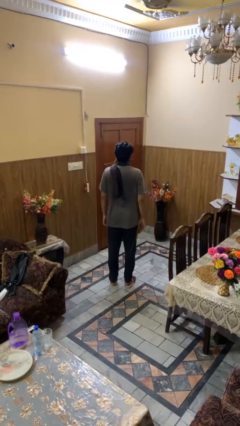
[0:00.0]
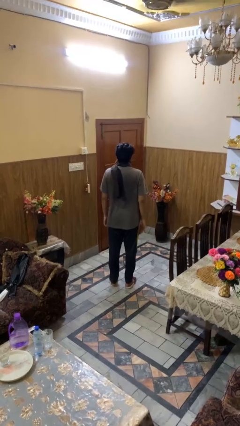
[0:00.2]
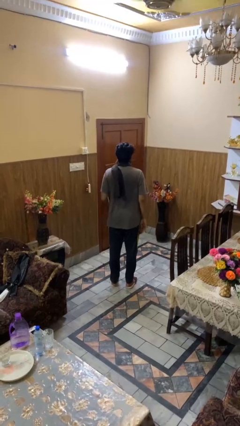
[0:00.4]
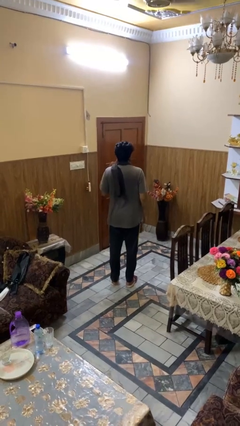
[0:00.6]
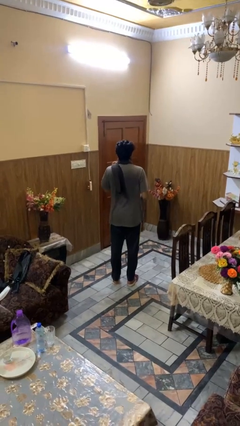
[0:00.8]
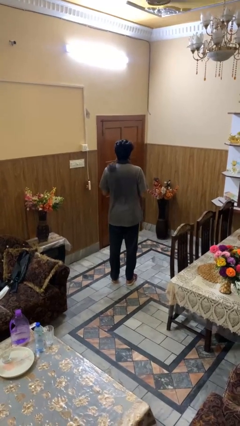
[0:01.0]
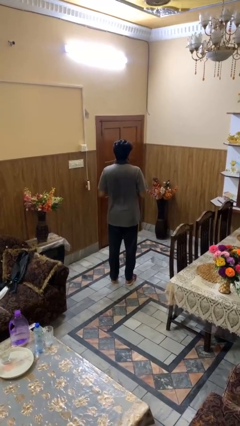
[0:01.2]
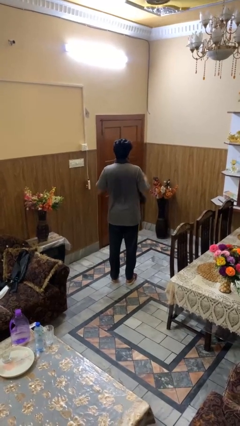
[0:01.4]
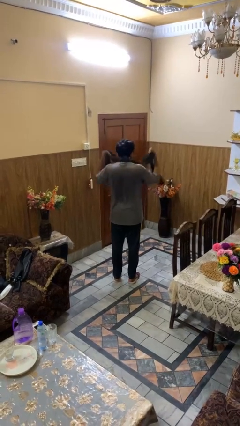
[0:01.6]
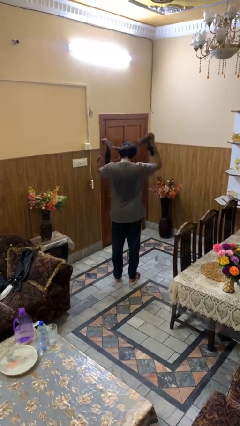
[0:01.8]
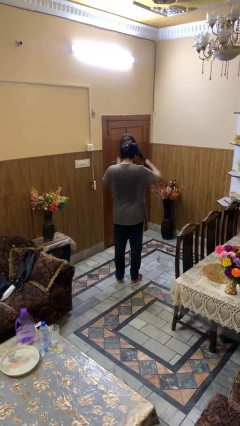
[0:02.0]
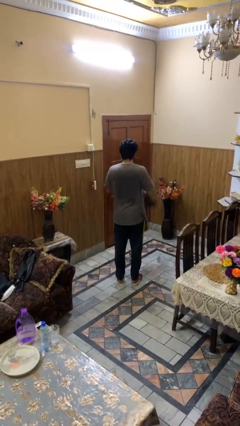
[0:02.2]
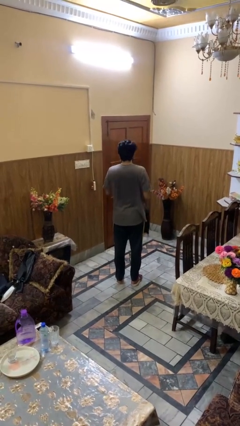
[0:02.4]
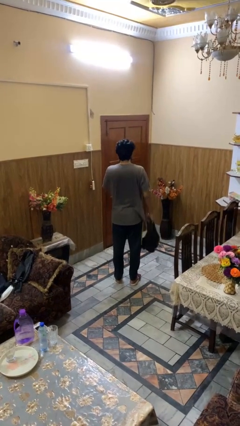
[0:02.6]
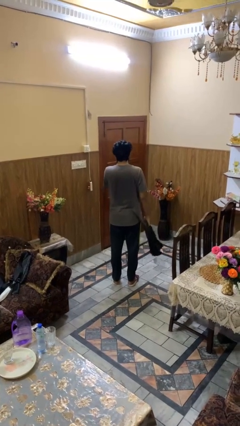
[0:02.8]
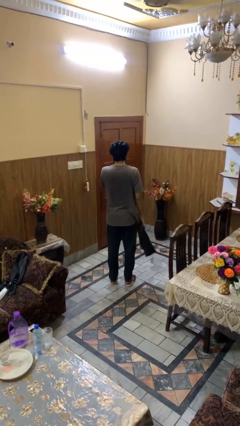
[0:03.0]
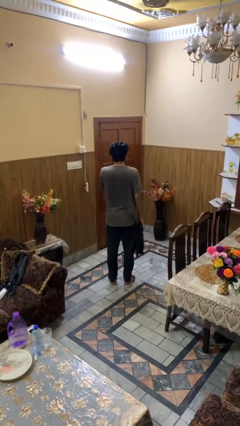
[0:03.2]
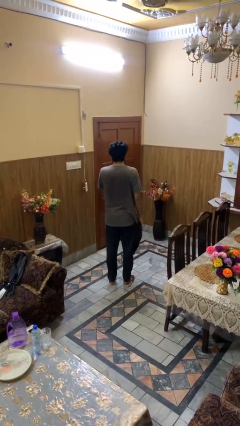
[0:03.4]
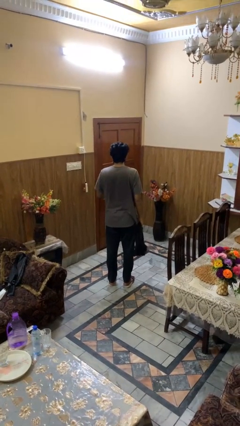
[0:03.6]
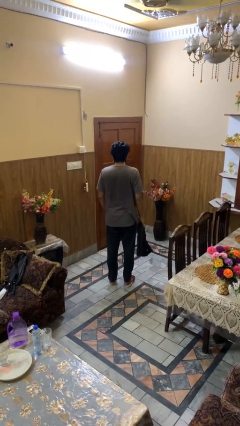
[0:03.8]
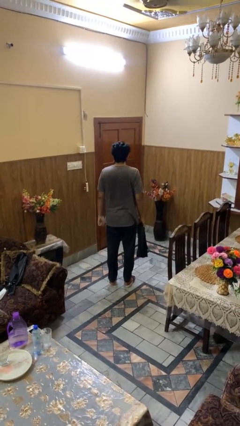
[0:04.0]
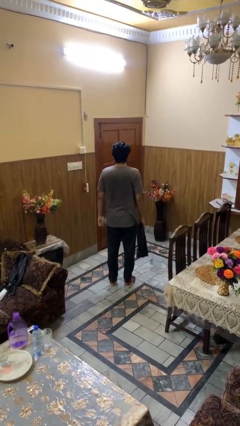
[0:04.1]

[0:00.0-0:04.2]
person takes off scarf

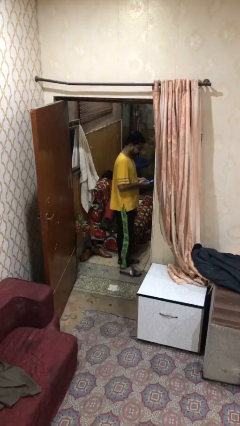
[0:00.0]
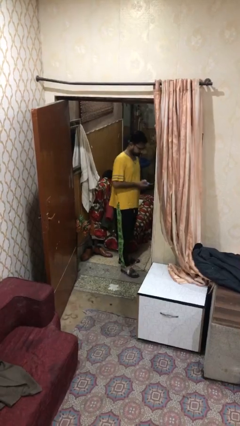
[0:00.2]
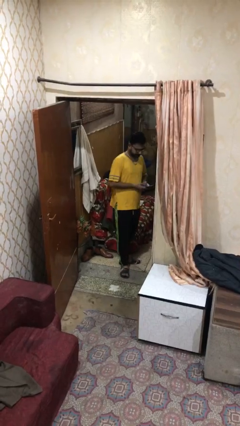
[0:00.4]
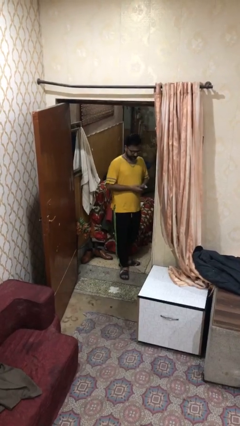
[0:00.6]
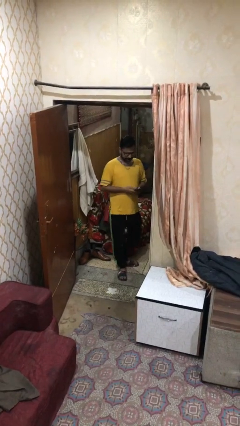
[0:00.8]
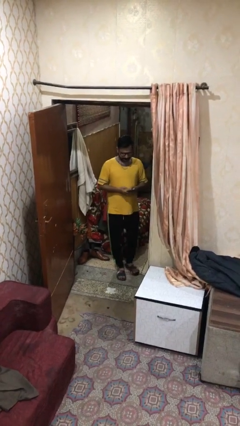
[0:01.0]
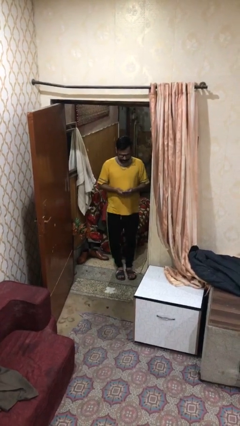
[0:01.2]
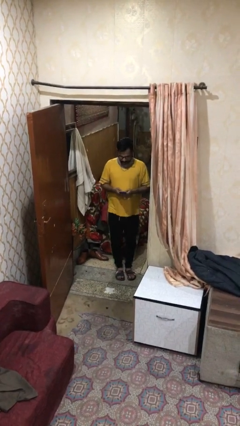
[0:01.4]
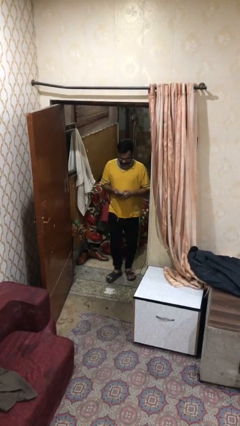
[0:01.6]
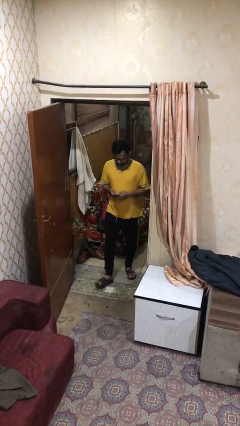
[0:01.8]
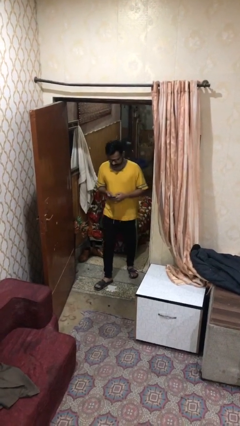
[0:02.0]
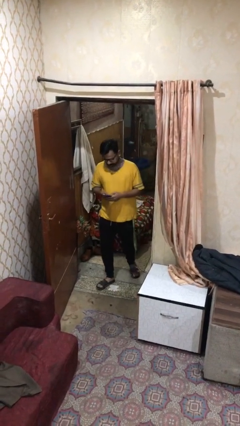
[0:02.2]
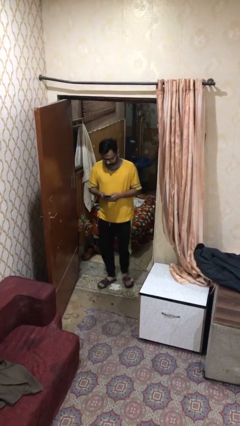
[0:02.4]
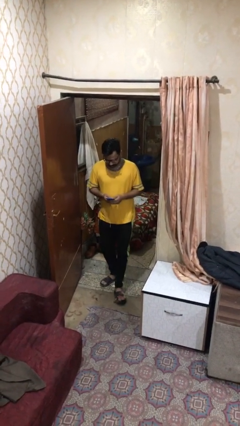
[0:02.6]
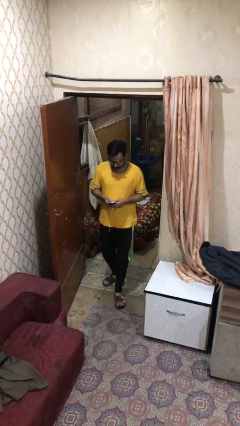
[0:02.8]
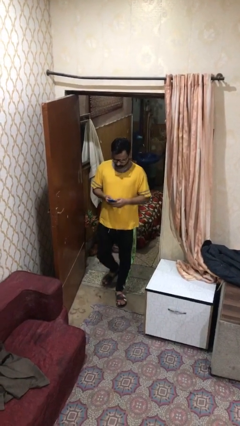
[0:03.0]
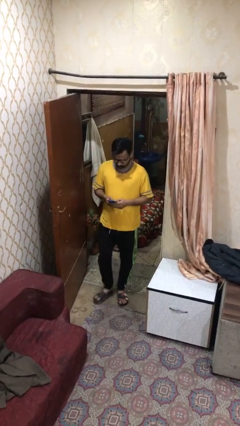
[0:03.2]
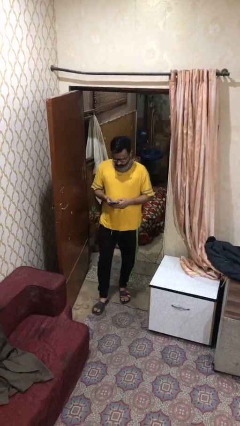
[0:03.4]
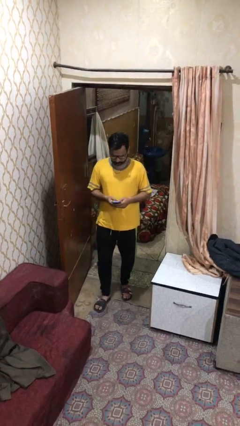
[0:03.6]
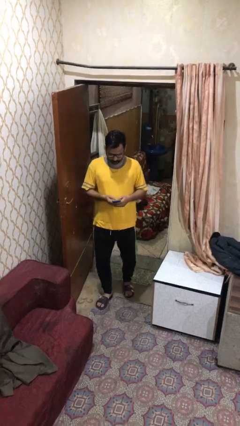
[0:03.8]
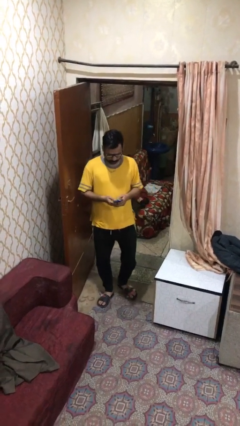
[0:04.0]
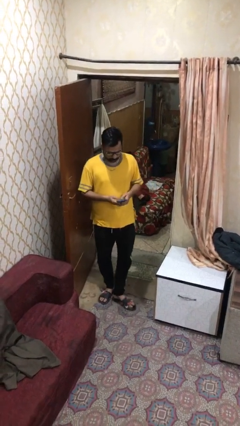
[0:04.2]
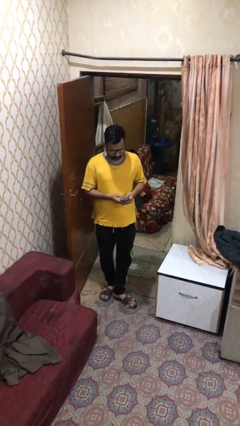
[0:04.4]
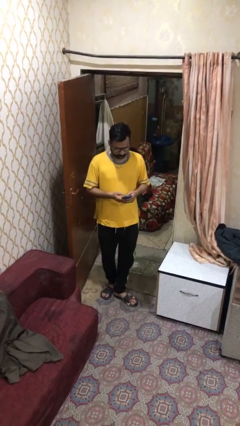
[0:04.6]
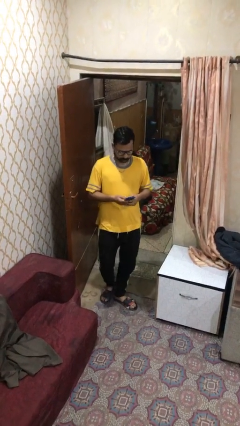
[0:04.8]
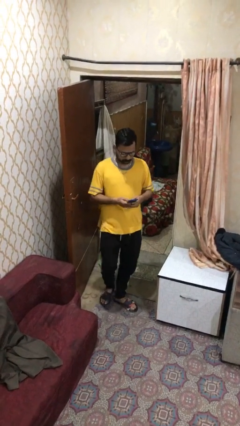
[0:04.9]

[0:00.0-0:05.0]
person enters scene through structure

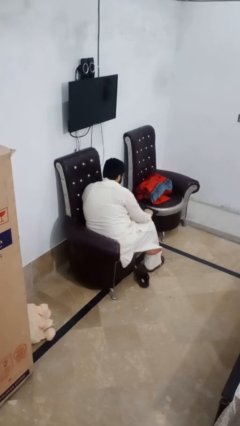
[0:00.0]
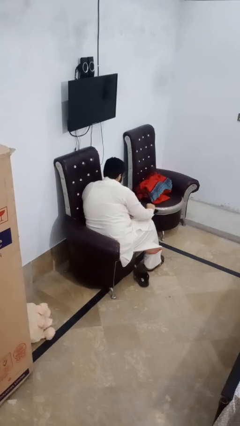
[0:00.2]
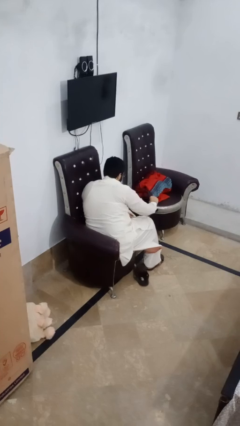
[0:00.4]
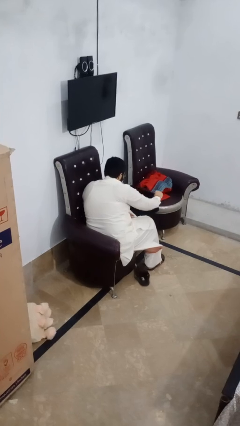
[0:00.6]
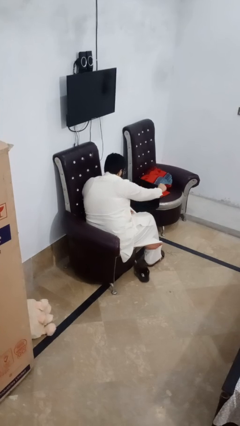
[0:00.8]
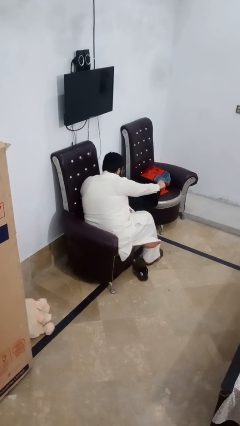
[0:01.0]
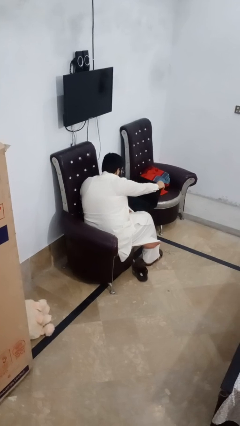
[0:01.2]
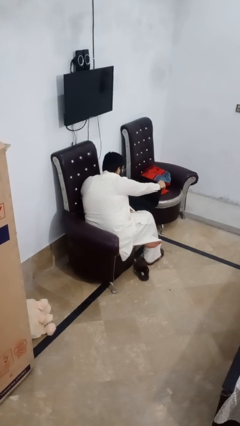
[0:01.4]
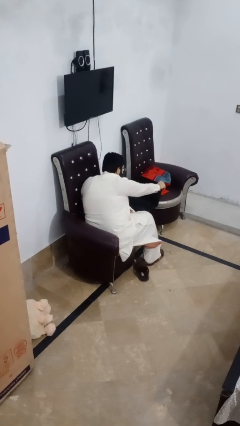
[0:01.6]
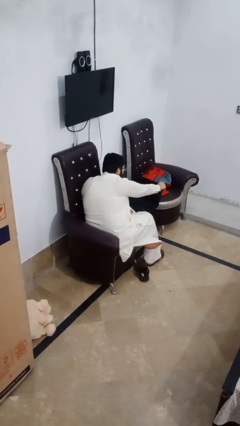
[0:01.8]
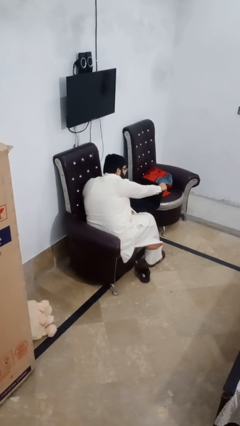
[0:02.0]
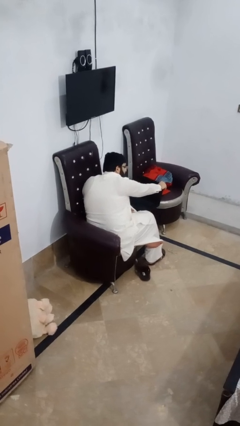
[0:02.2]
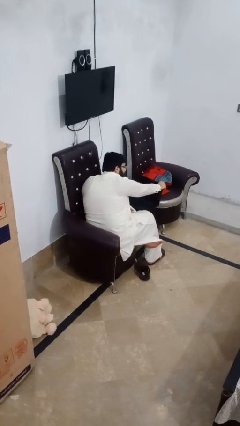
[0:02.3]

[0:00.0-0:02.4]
person opens laptop

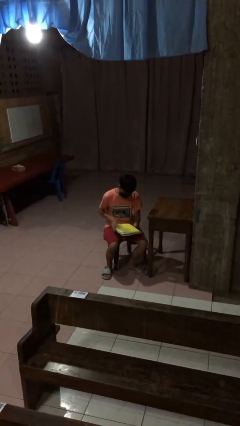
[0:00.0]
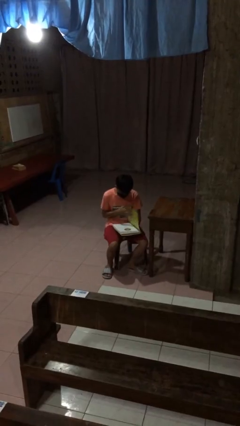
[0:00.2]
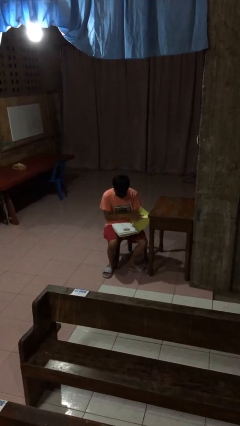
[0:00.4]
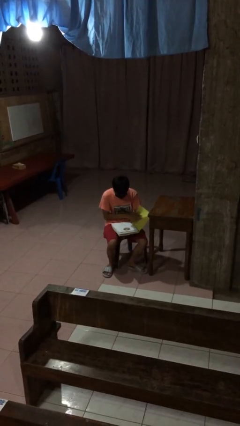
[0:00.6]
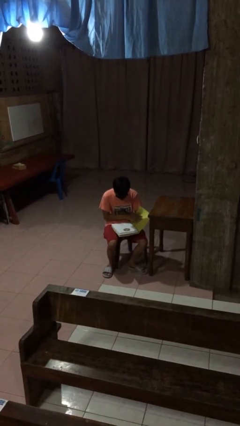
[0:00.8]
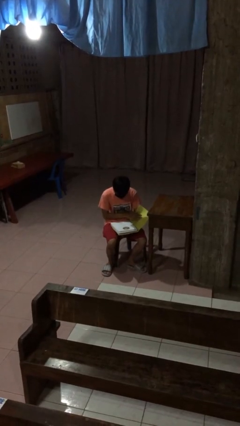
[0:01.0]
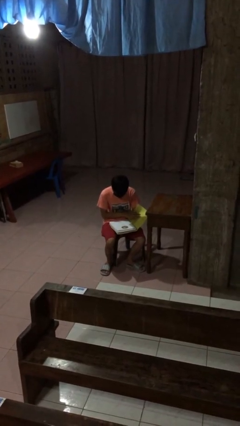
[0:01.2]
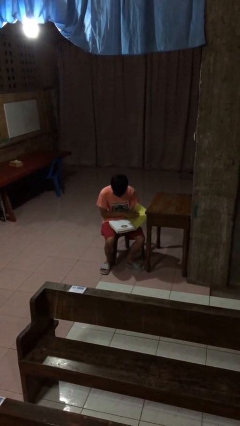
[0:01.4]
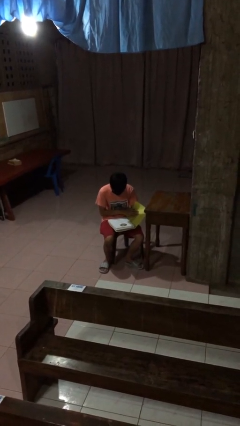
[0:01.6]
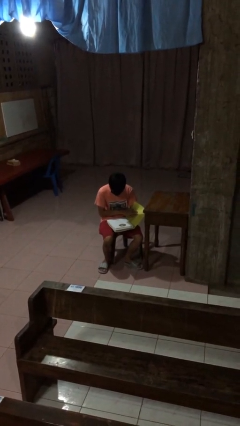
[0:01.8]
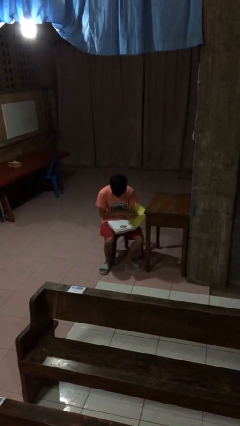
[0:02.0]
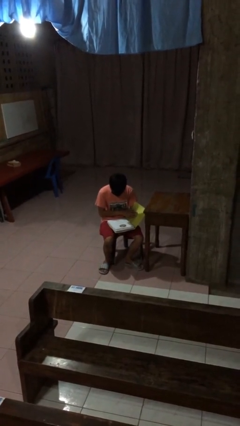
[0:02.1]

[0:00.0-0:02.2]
person reads document

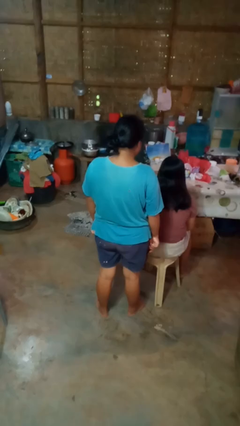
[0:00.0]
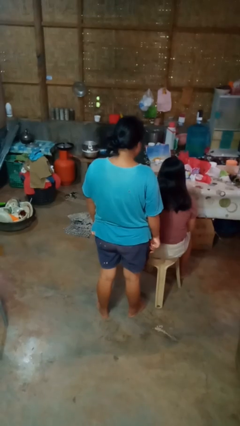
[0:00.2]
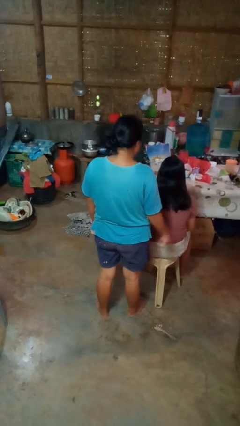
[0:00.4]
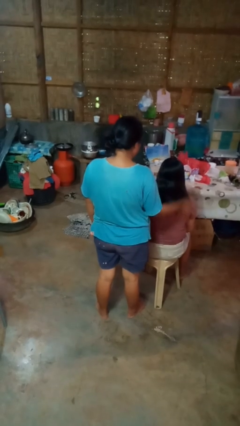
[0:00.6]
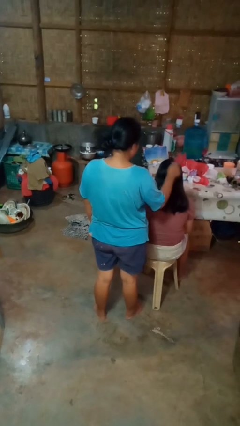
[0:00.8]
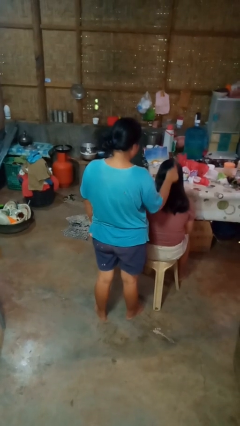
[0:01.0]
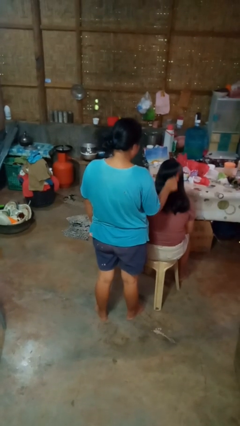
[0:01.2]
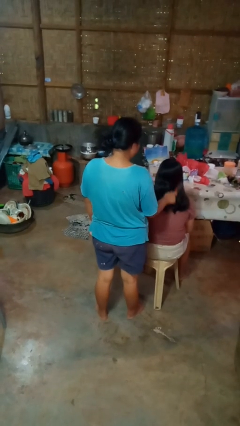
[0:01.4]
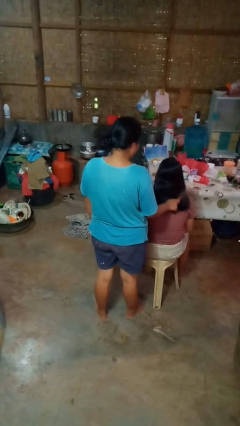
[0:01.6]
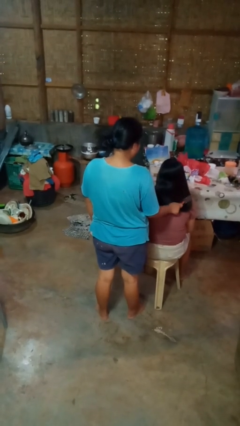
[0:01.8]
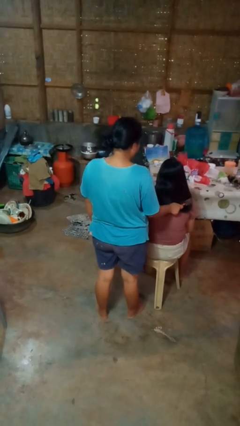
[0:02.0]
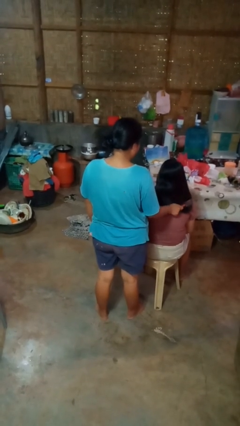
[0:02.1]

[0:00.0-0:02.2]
person brushes hair of person

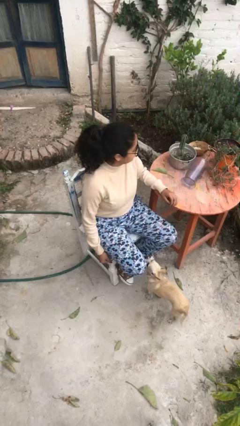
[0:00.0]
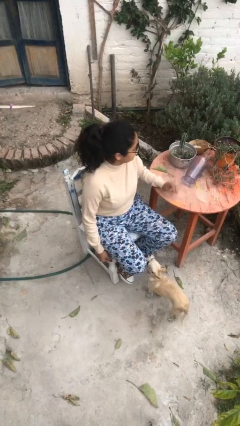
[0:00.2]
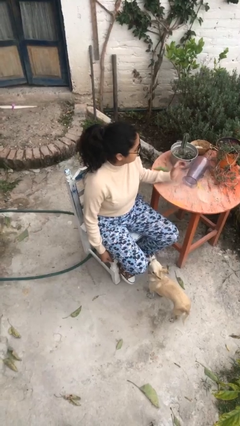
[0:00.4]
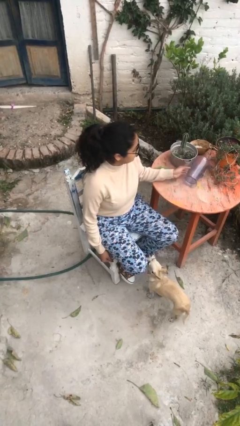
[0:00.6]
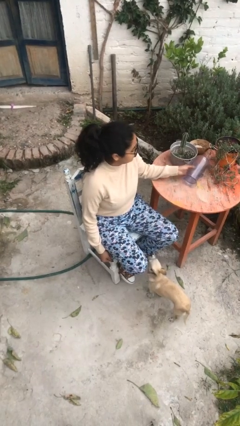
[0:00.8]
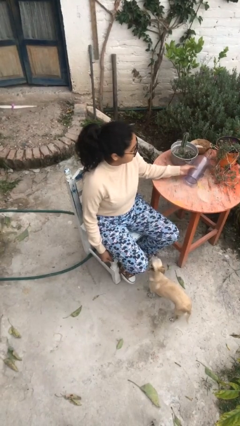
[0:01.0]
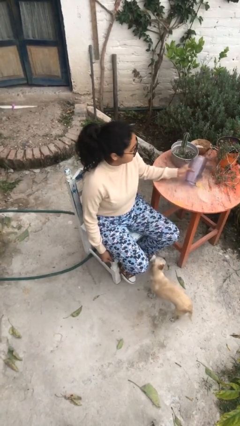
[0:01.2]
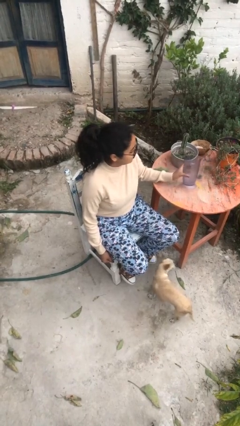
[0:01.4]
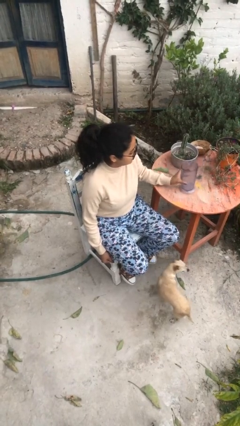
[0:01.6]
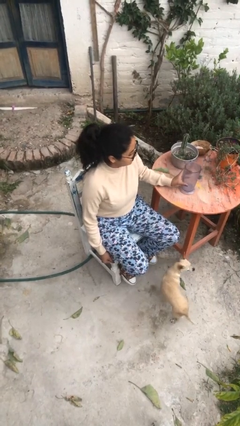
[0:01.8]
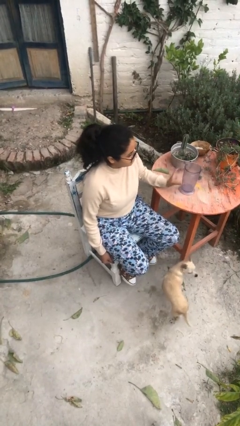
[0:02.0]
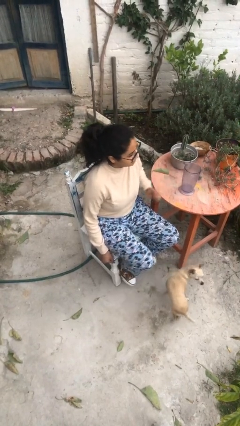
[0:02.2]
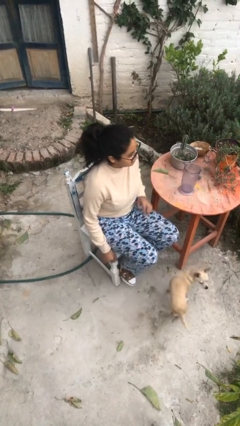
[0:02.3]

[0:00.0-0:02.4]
person sets upright glass
